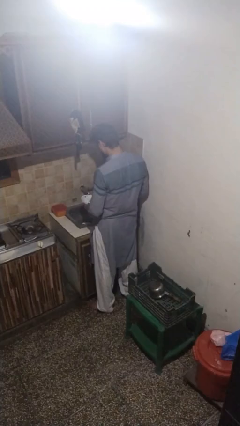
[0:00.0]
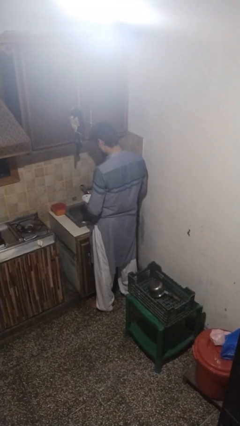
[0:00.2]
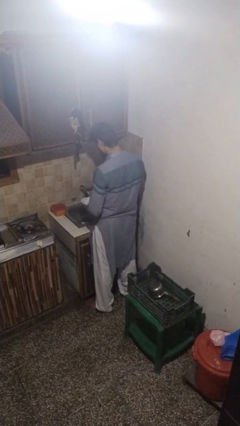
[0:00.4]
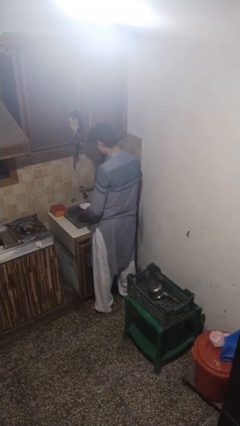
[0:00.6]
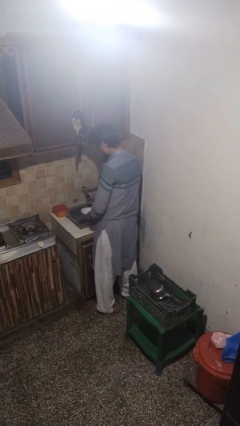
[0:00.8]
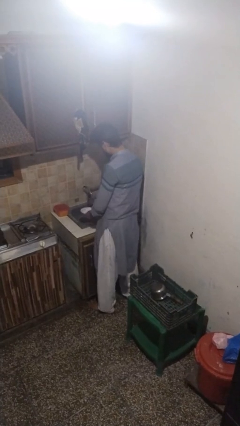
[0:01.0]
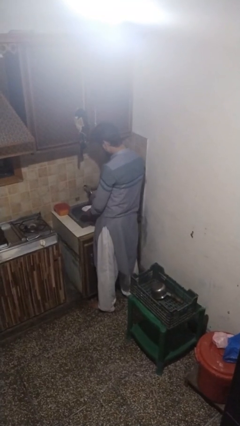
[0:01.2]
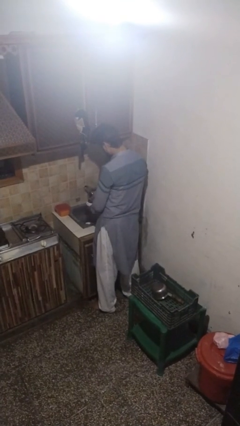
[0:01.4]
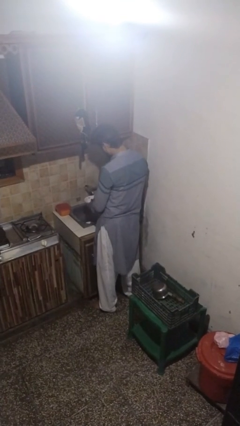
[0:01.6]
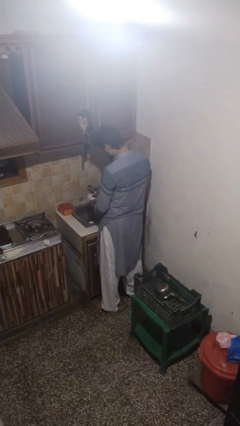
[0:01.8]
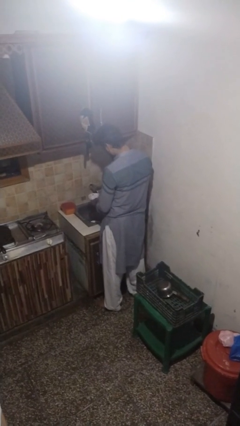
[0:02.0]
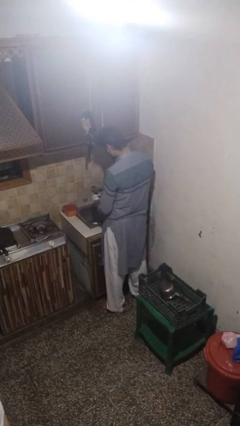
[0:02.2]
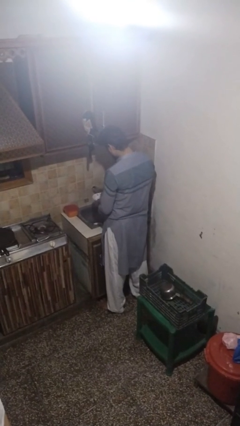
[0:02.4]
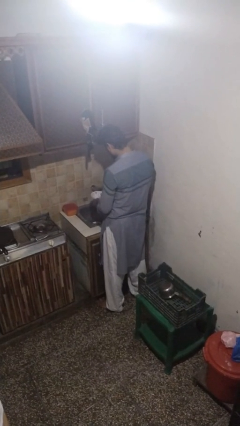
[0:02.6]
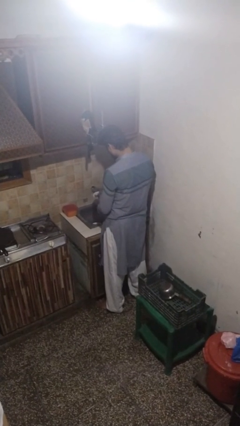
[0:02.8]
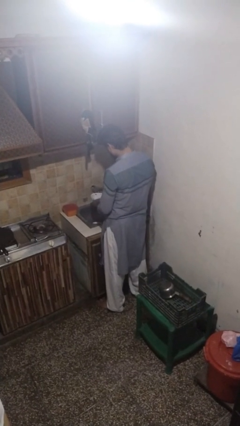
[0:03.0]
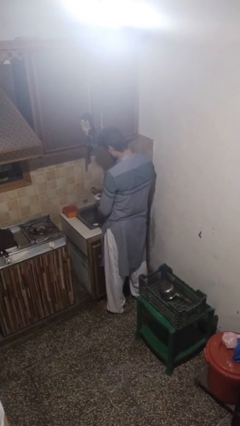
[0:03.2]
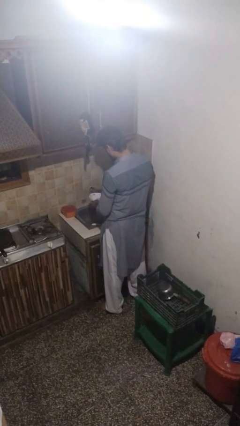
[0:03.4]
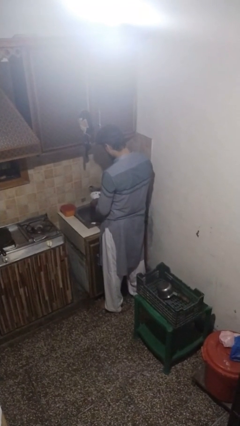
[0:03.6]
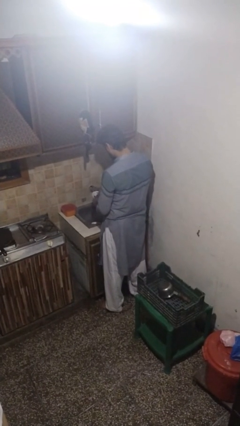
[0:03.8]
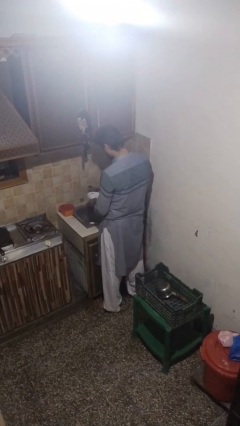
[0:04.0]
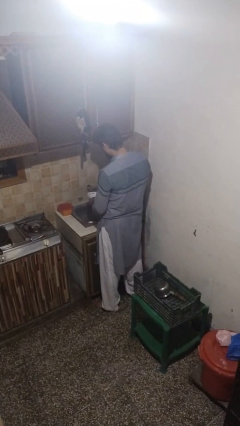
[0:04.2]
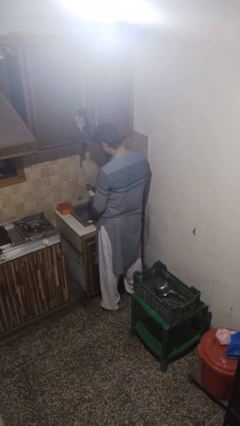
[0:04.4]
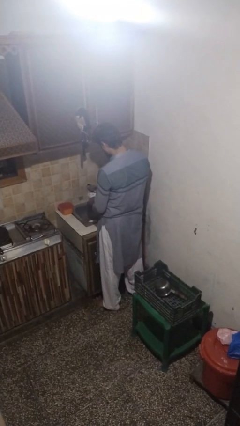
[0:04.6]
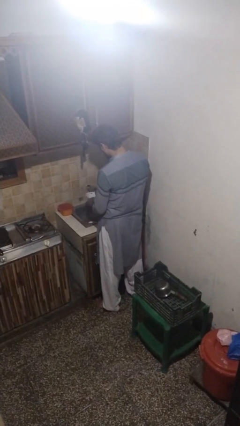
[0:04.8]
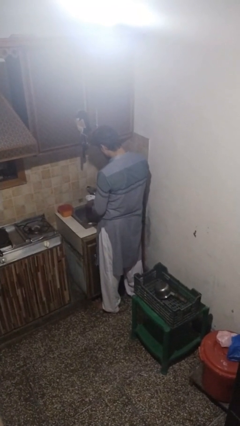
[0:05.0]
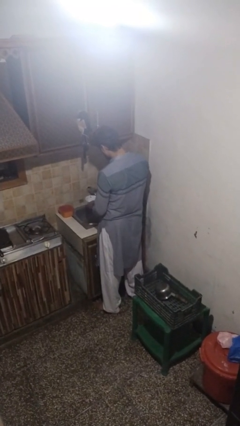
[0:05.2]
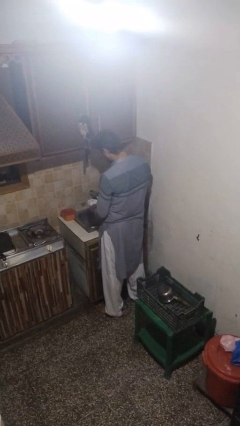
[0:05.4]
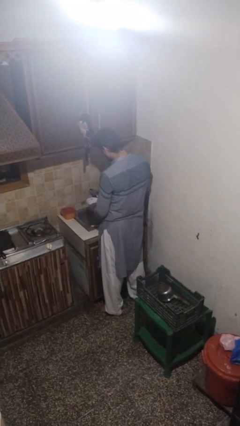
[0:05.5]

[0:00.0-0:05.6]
person washes dish

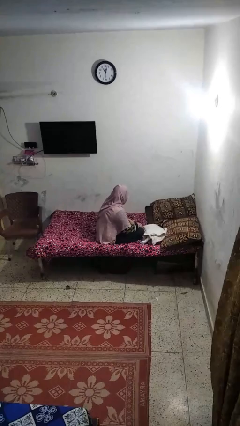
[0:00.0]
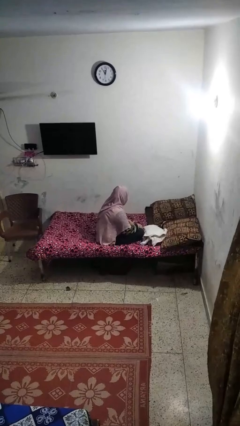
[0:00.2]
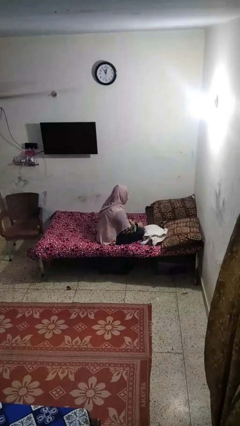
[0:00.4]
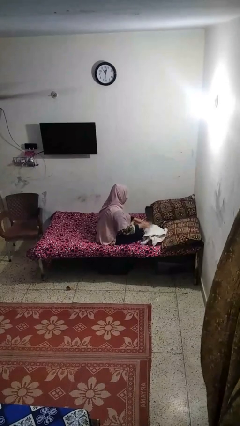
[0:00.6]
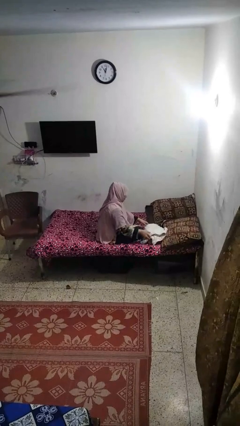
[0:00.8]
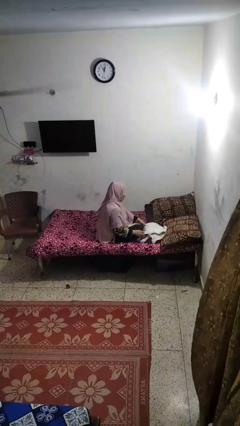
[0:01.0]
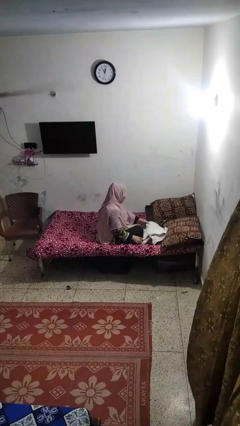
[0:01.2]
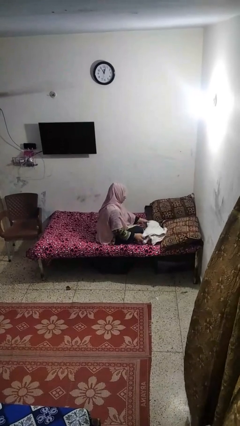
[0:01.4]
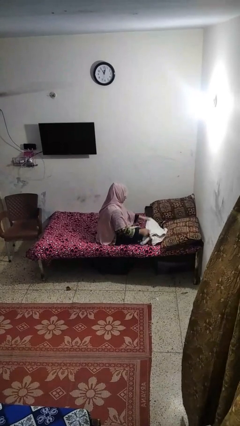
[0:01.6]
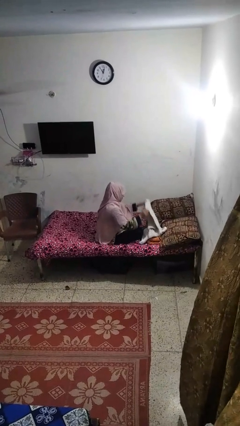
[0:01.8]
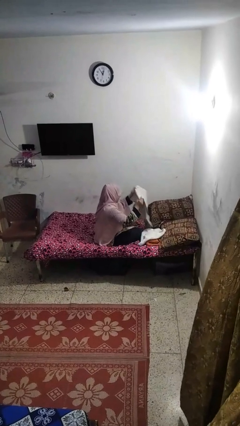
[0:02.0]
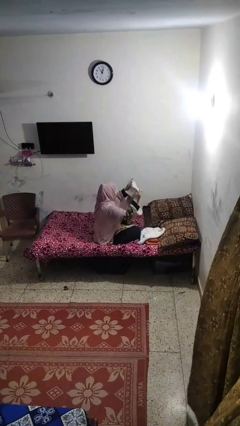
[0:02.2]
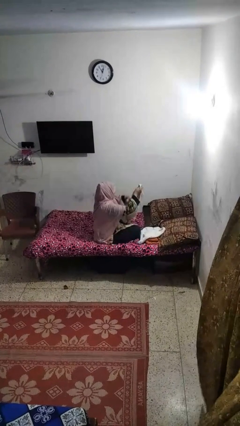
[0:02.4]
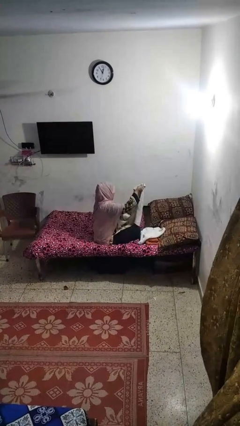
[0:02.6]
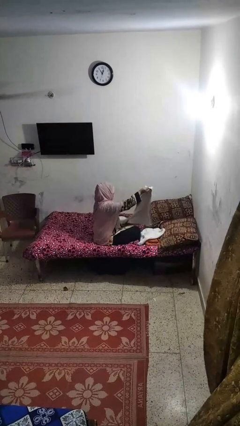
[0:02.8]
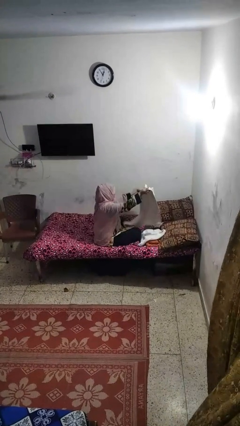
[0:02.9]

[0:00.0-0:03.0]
person folds towel

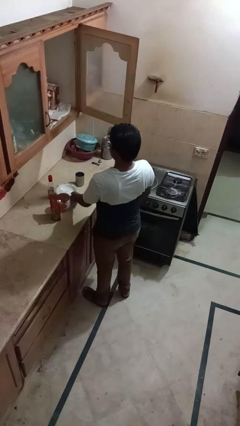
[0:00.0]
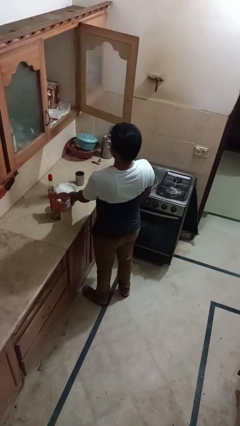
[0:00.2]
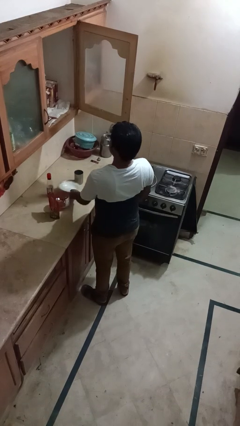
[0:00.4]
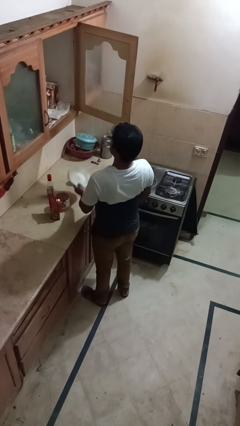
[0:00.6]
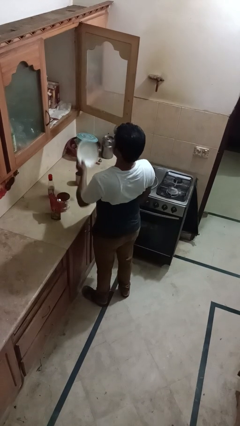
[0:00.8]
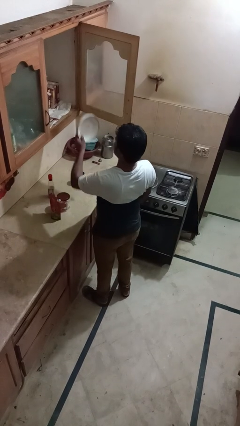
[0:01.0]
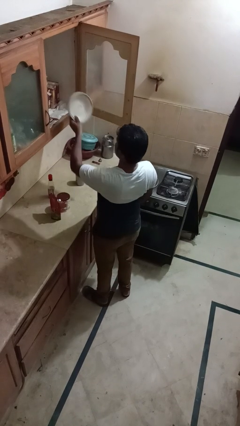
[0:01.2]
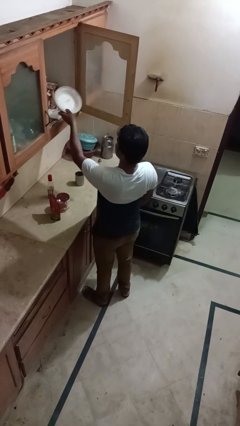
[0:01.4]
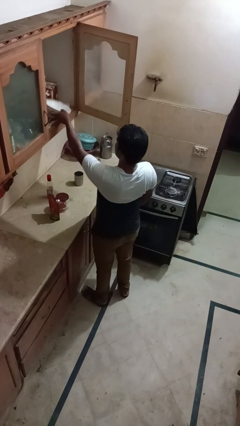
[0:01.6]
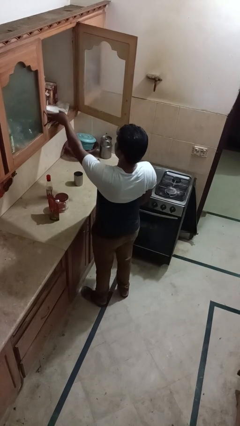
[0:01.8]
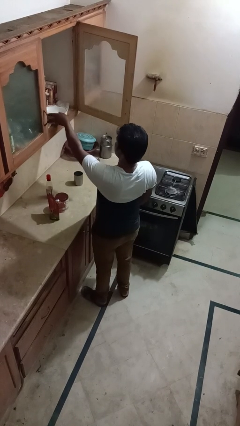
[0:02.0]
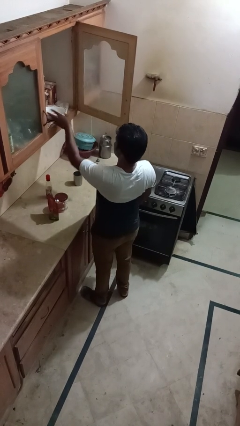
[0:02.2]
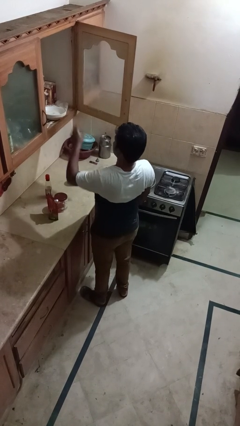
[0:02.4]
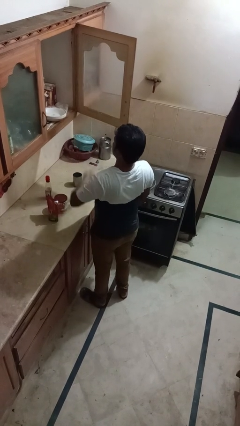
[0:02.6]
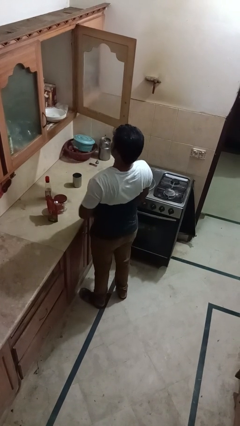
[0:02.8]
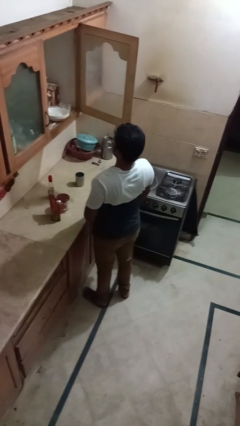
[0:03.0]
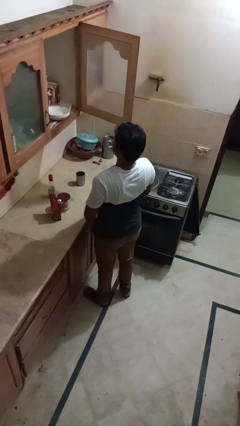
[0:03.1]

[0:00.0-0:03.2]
person puts object in cabinet

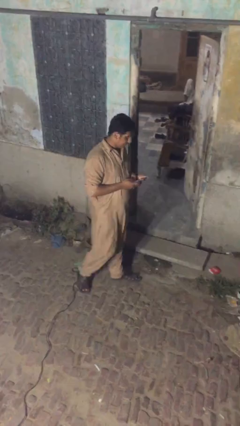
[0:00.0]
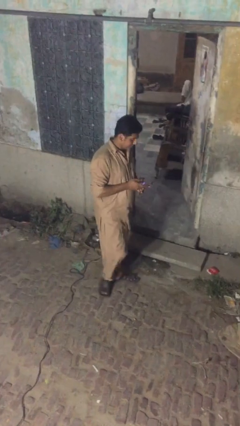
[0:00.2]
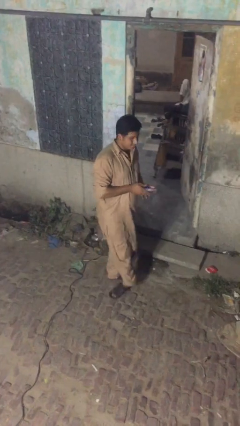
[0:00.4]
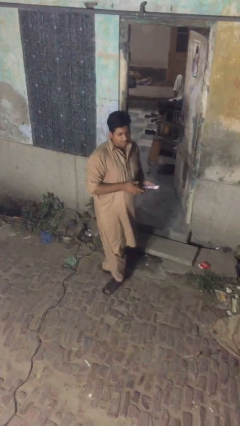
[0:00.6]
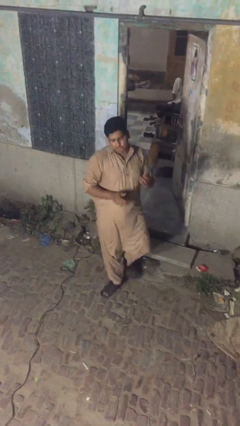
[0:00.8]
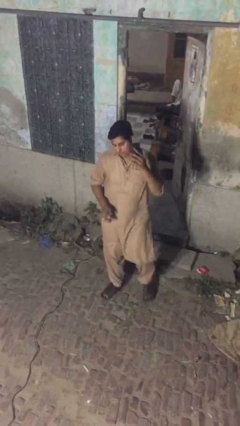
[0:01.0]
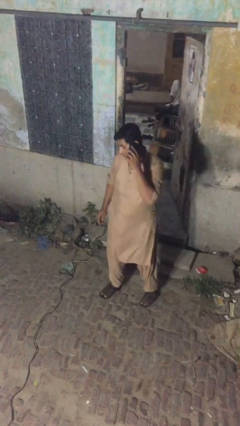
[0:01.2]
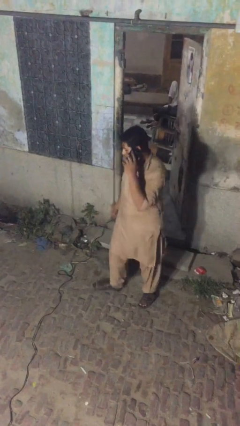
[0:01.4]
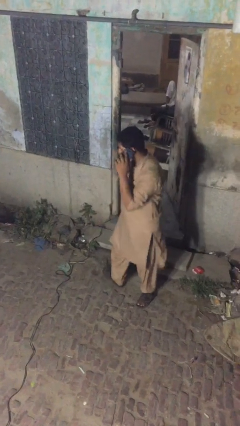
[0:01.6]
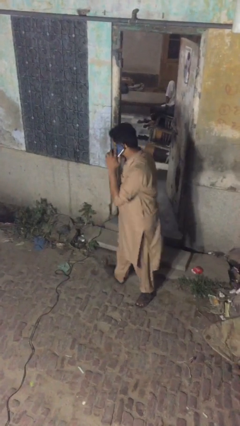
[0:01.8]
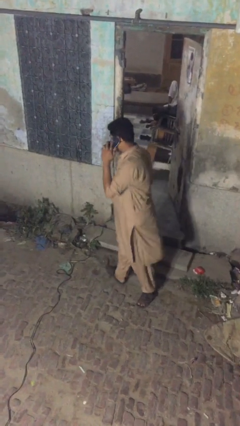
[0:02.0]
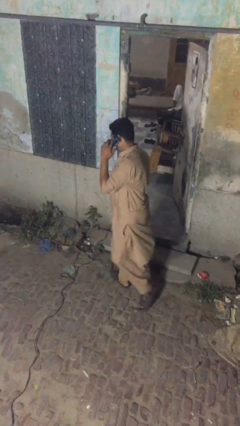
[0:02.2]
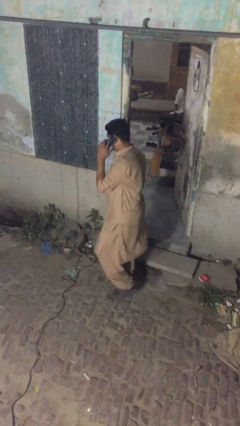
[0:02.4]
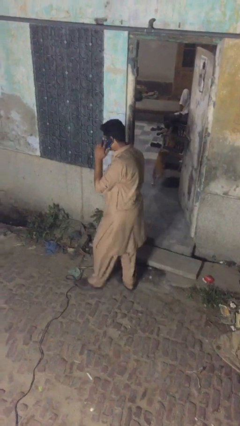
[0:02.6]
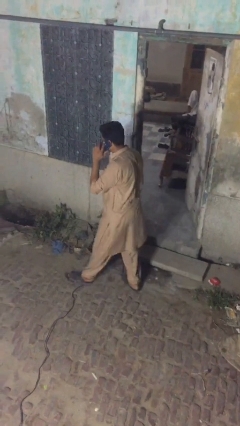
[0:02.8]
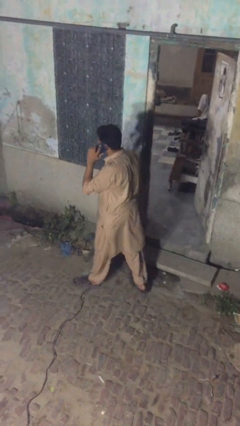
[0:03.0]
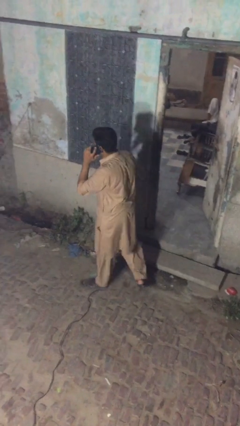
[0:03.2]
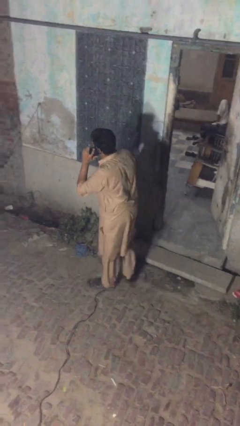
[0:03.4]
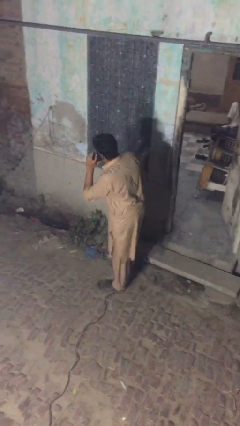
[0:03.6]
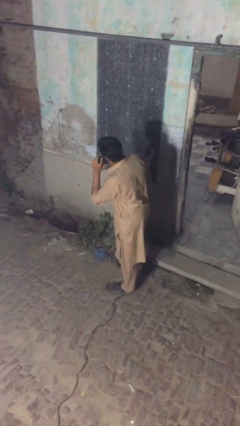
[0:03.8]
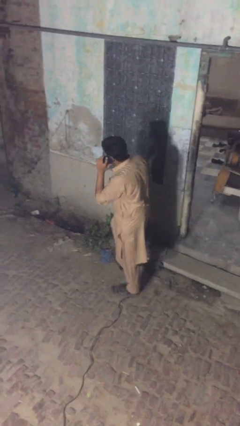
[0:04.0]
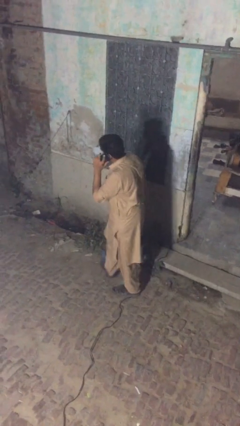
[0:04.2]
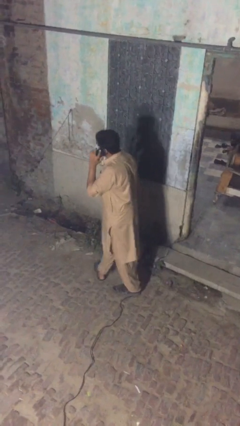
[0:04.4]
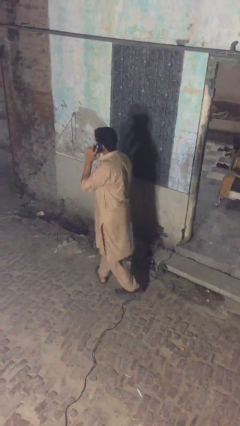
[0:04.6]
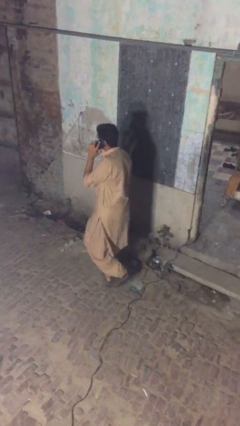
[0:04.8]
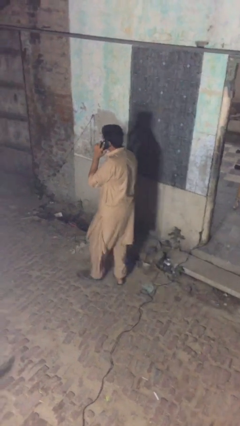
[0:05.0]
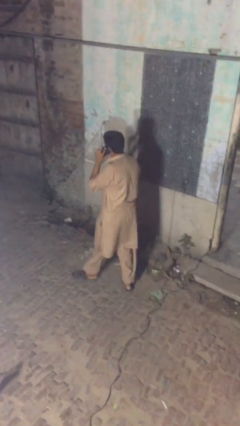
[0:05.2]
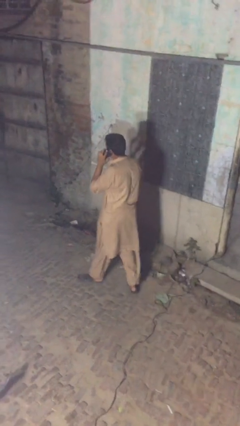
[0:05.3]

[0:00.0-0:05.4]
person talks on phone

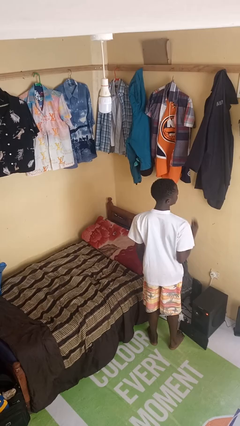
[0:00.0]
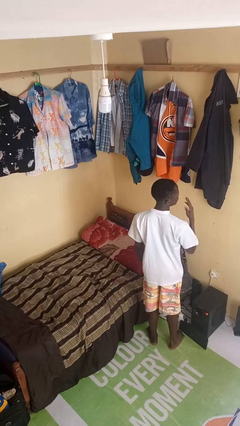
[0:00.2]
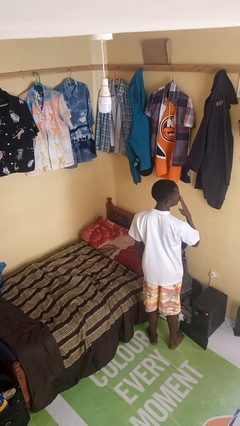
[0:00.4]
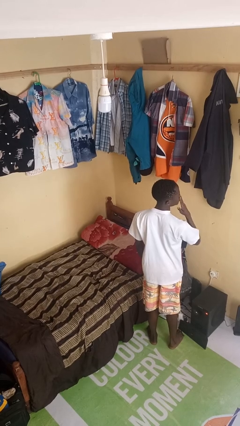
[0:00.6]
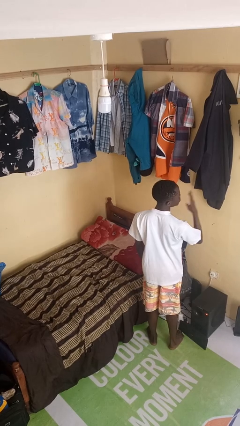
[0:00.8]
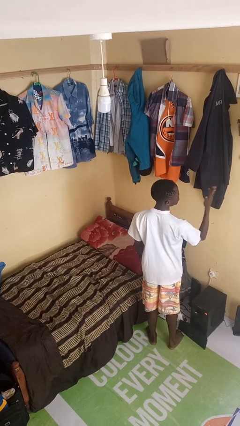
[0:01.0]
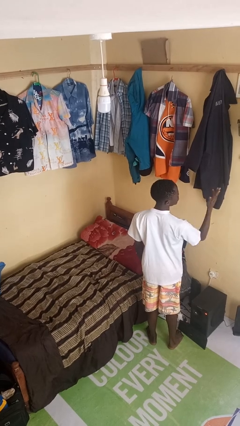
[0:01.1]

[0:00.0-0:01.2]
person gestures blow kiss
